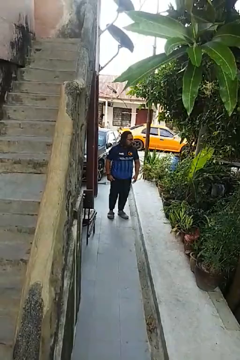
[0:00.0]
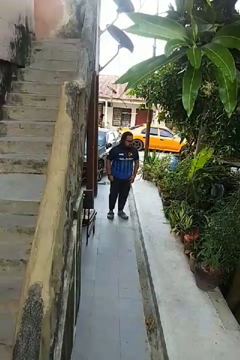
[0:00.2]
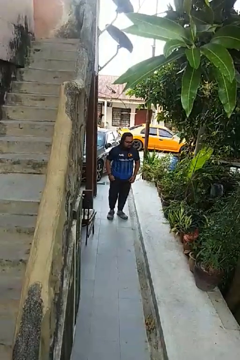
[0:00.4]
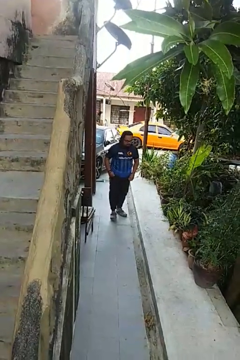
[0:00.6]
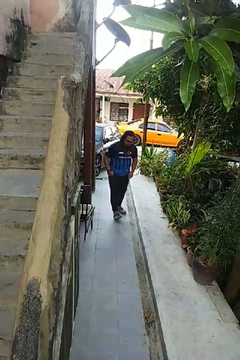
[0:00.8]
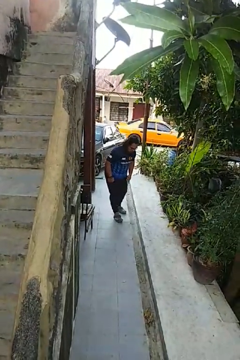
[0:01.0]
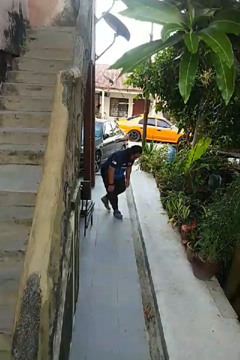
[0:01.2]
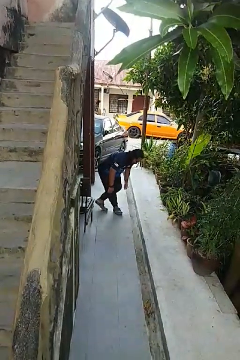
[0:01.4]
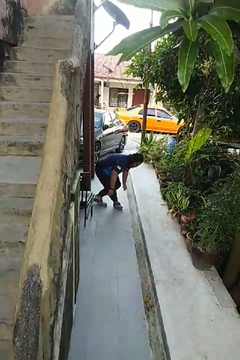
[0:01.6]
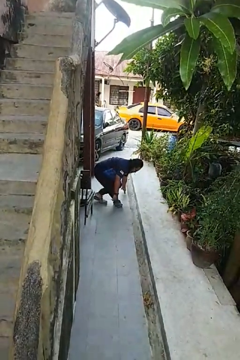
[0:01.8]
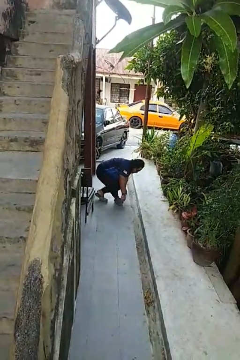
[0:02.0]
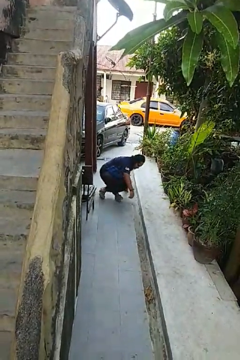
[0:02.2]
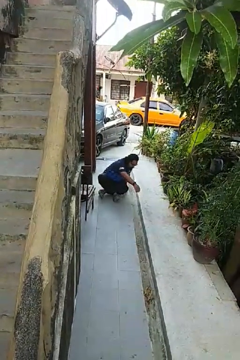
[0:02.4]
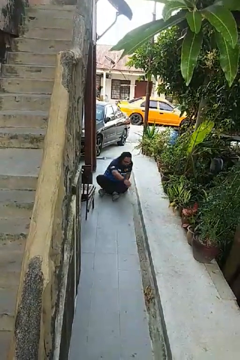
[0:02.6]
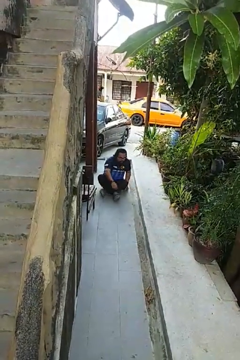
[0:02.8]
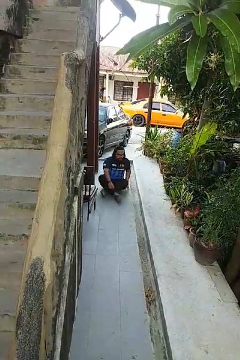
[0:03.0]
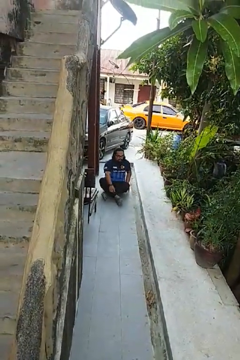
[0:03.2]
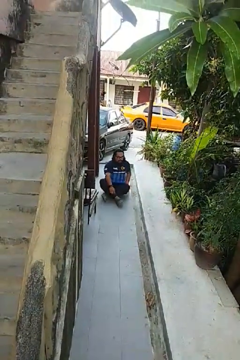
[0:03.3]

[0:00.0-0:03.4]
person sits crisscross

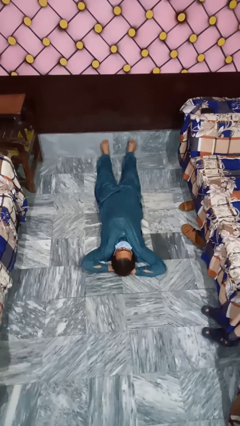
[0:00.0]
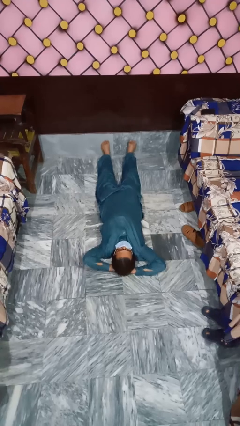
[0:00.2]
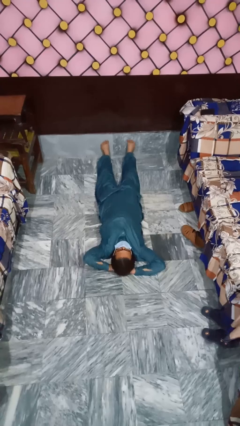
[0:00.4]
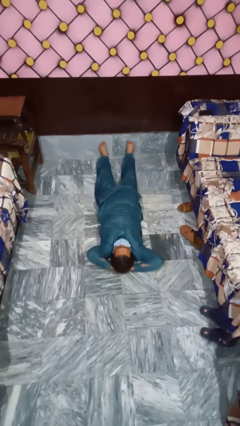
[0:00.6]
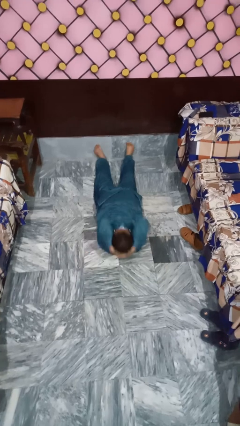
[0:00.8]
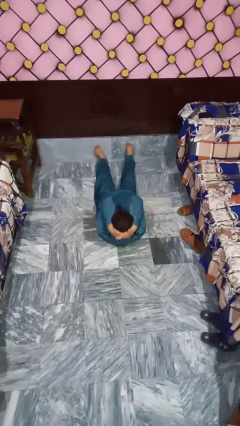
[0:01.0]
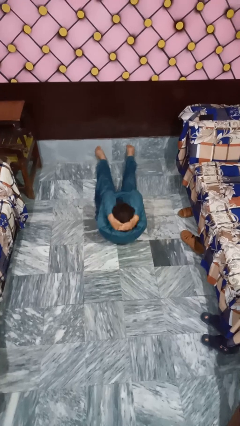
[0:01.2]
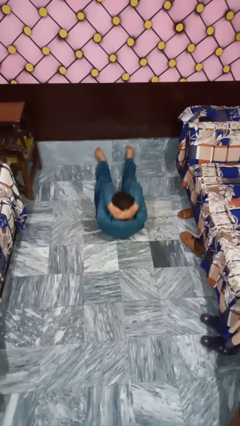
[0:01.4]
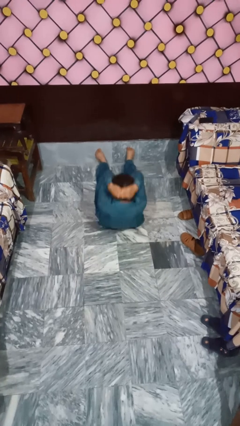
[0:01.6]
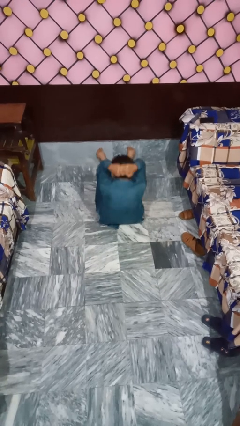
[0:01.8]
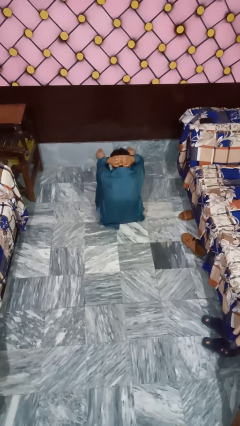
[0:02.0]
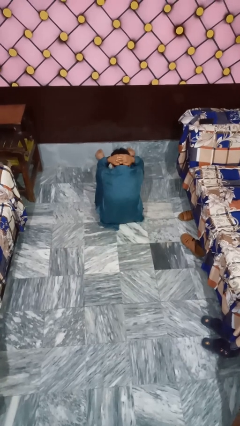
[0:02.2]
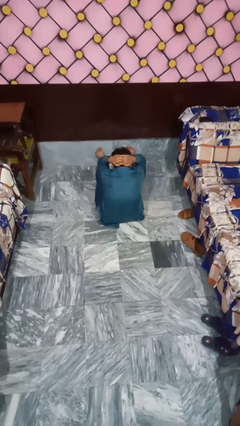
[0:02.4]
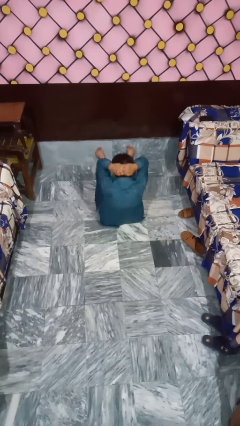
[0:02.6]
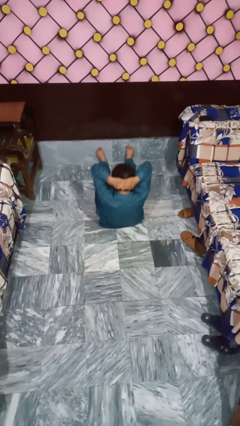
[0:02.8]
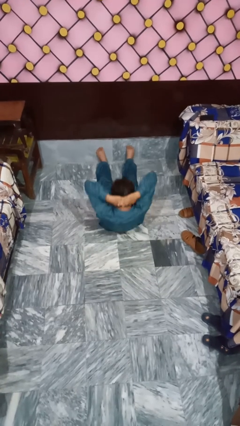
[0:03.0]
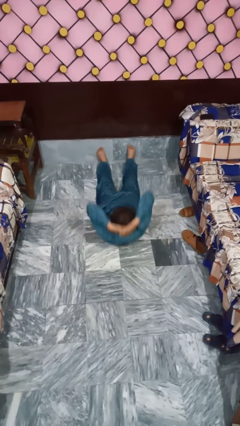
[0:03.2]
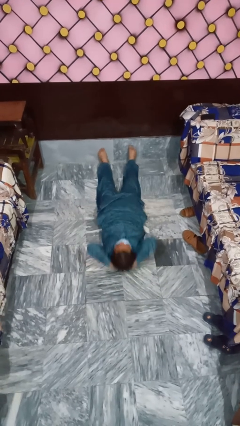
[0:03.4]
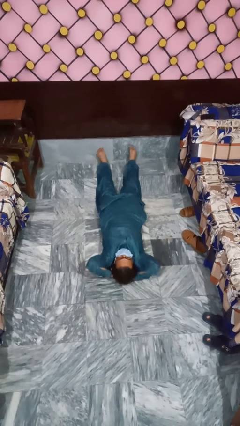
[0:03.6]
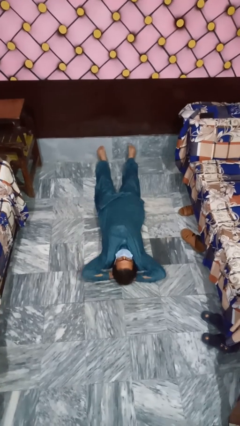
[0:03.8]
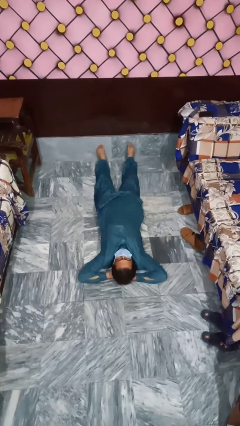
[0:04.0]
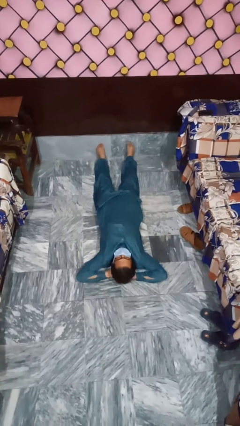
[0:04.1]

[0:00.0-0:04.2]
person exercises with situp

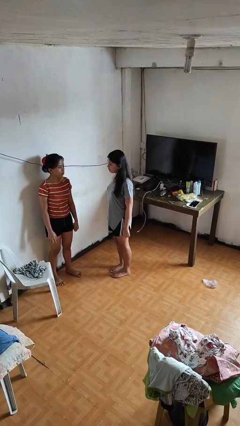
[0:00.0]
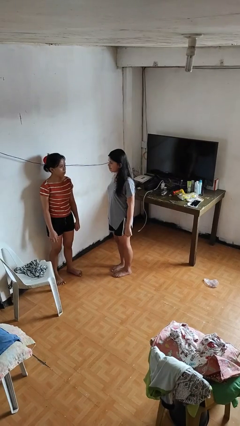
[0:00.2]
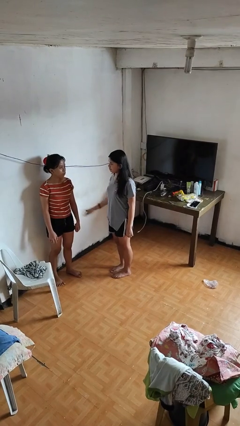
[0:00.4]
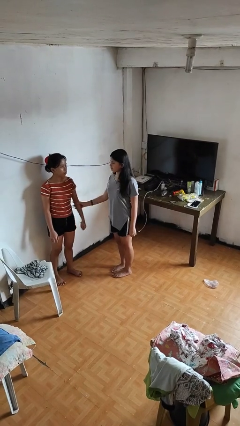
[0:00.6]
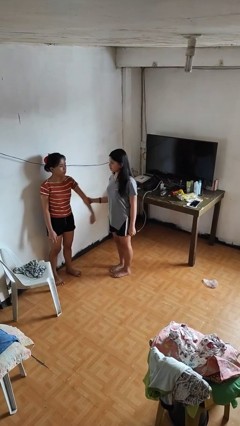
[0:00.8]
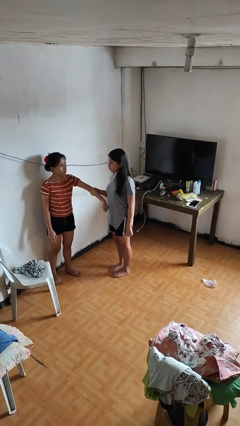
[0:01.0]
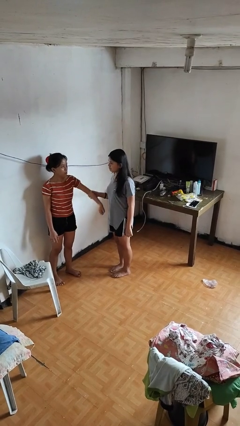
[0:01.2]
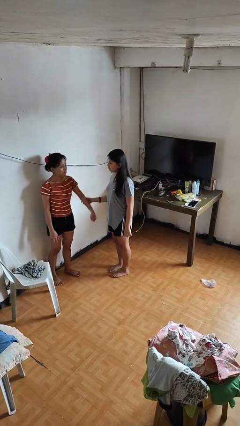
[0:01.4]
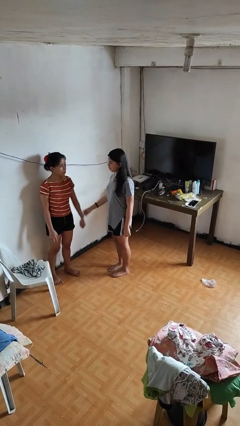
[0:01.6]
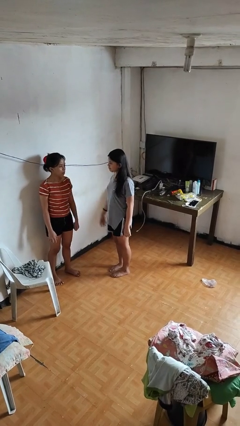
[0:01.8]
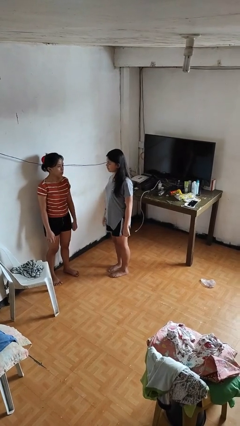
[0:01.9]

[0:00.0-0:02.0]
person grabs person by forearm

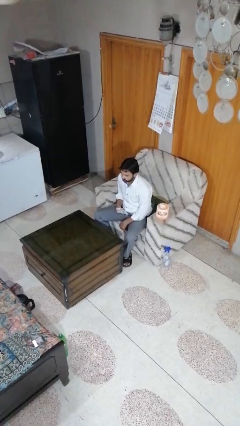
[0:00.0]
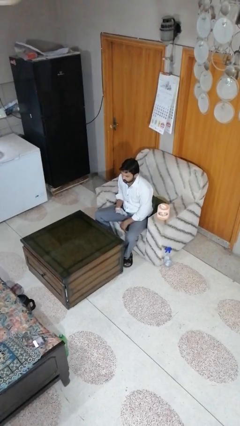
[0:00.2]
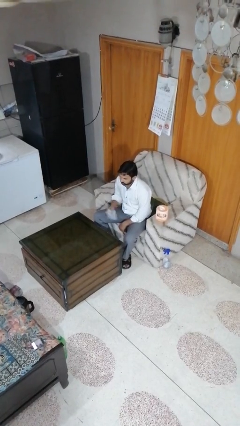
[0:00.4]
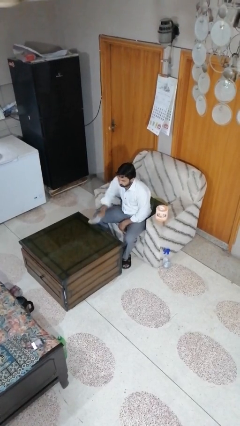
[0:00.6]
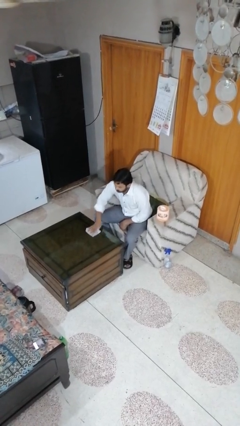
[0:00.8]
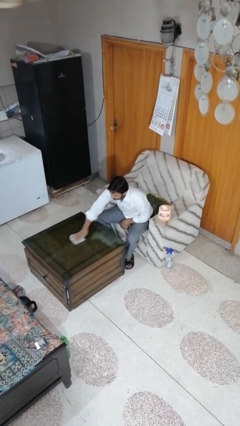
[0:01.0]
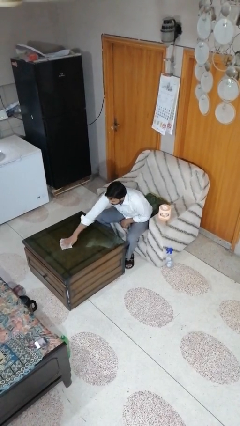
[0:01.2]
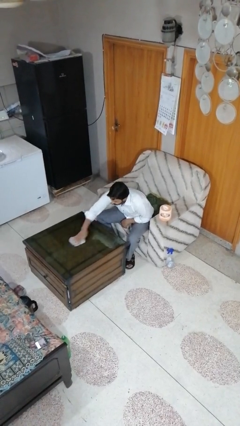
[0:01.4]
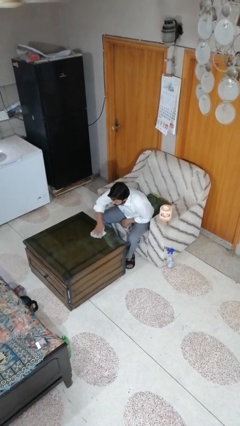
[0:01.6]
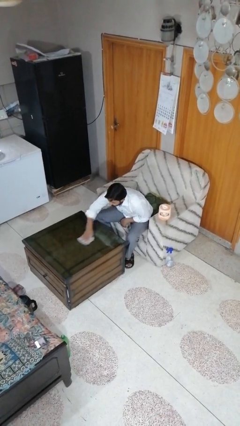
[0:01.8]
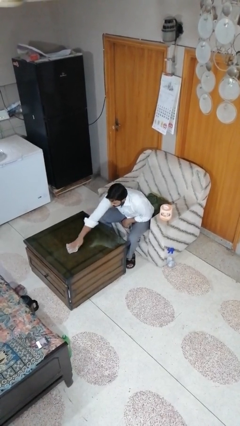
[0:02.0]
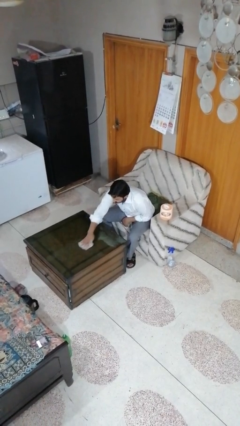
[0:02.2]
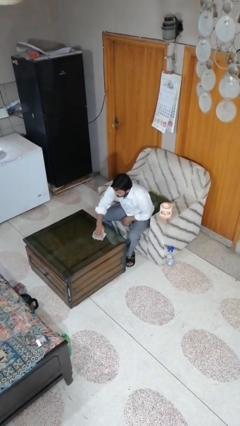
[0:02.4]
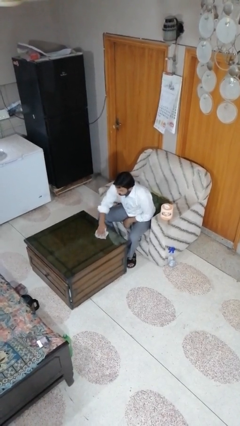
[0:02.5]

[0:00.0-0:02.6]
person cleans table with rag

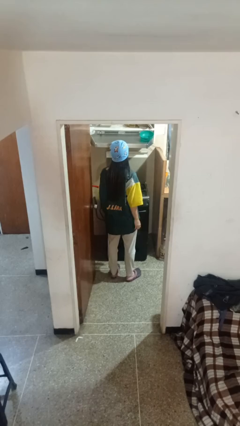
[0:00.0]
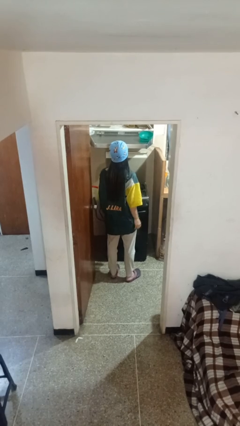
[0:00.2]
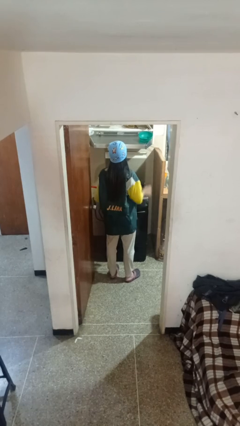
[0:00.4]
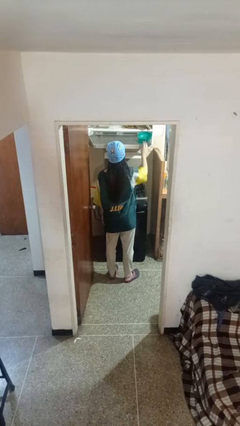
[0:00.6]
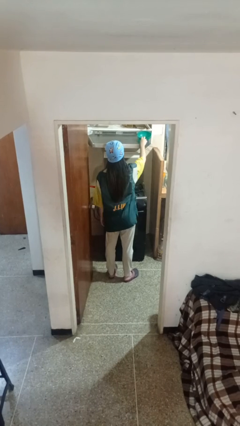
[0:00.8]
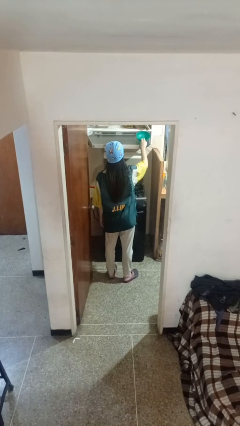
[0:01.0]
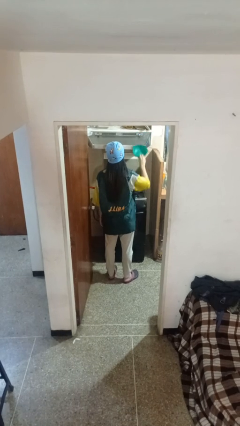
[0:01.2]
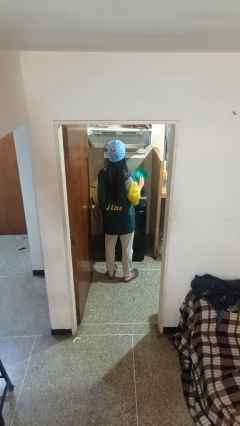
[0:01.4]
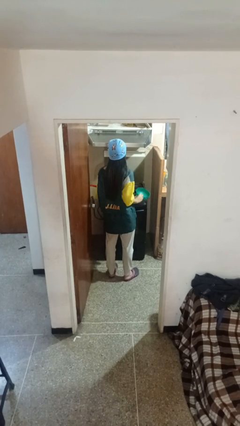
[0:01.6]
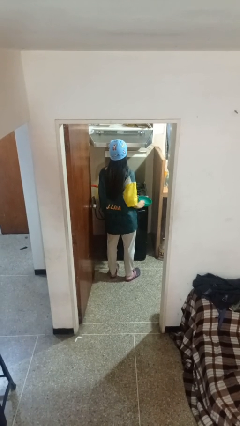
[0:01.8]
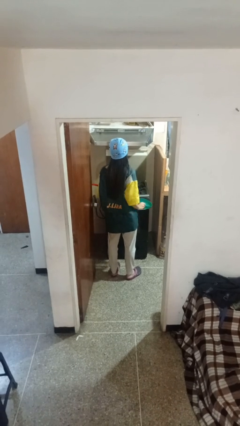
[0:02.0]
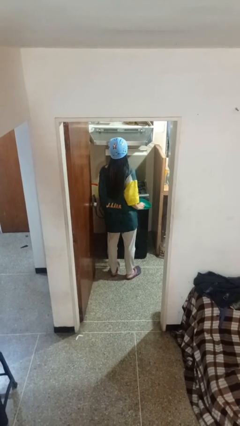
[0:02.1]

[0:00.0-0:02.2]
person picks up object from countertop

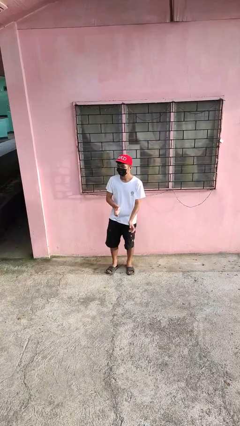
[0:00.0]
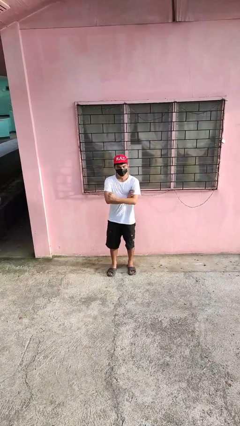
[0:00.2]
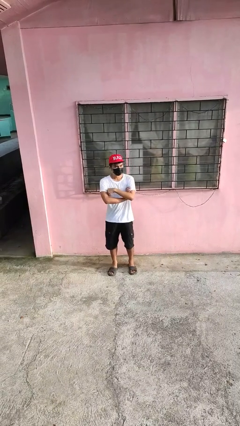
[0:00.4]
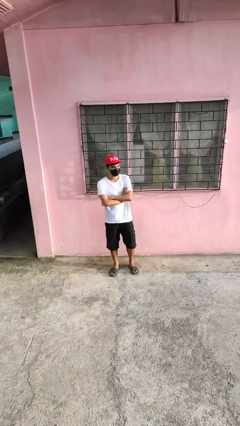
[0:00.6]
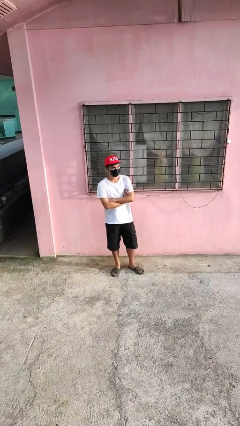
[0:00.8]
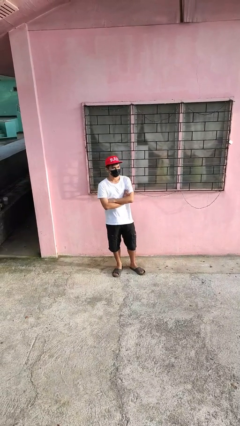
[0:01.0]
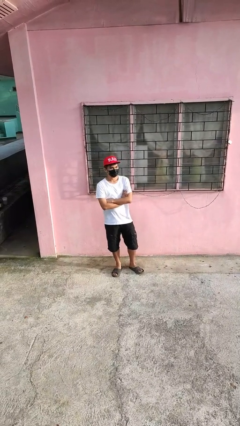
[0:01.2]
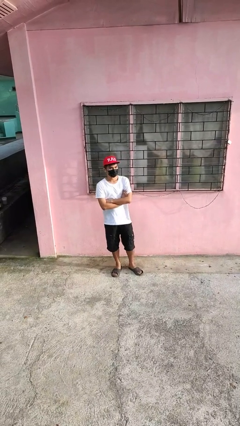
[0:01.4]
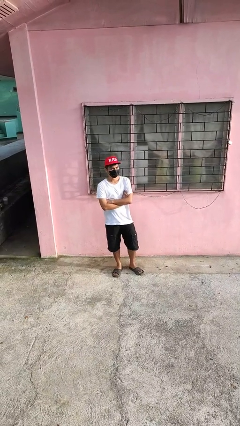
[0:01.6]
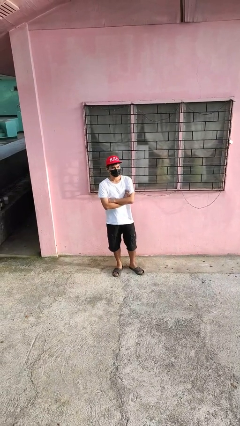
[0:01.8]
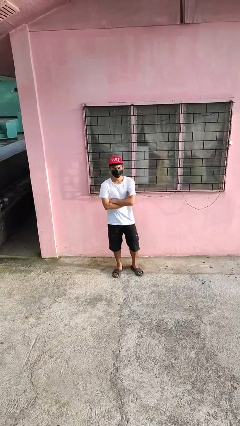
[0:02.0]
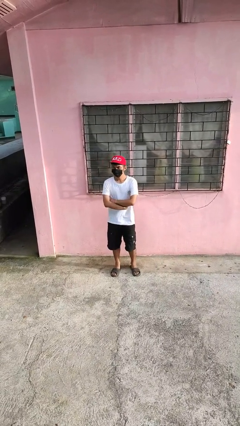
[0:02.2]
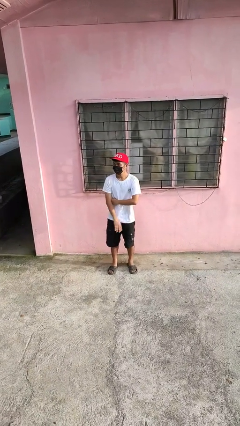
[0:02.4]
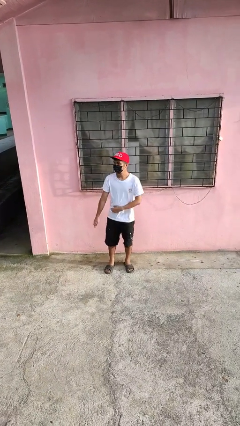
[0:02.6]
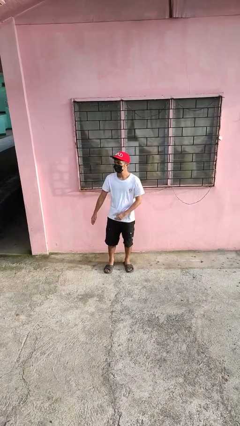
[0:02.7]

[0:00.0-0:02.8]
person crosses arms

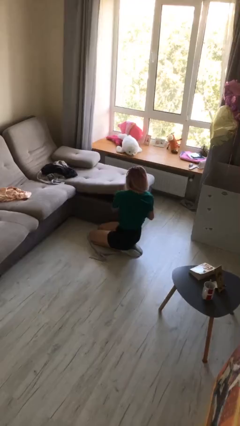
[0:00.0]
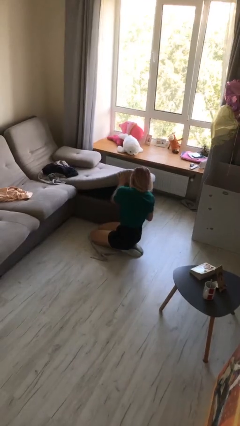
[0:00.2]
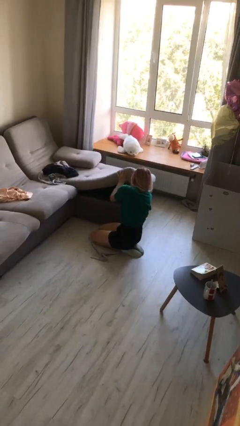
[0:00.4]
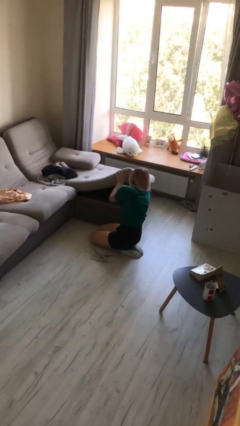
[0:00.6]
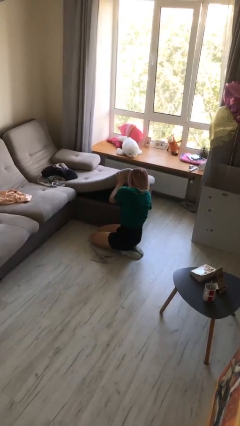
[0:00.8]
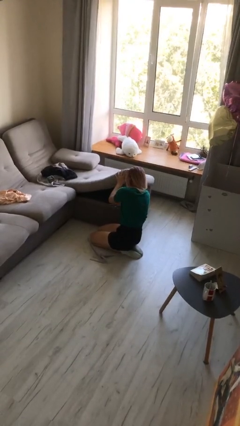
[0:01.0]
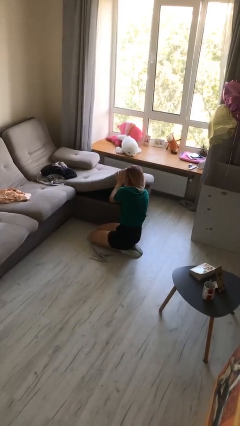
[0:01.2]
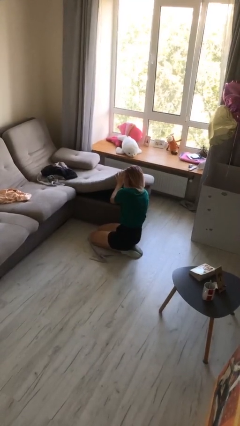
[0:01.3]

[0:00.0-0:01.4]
person searches under couch
